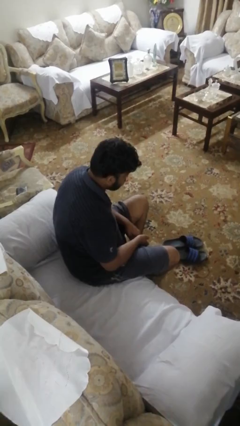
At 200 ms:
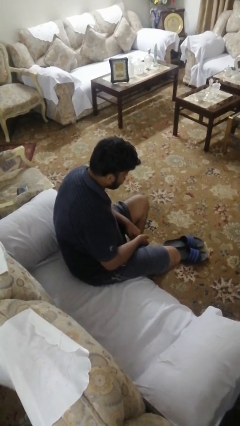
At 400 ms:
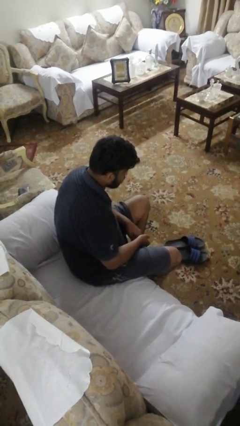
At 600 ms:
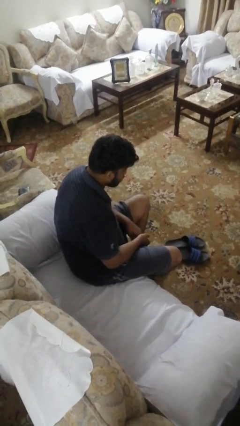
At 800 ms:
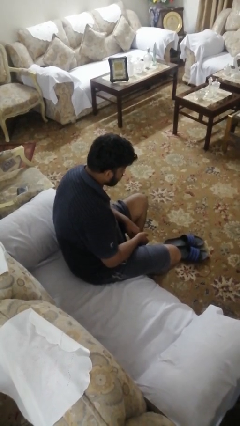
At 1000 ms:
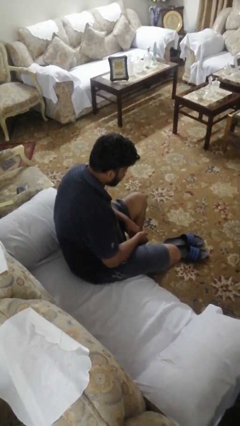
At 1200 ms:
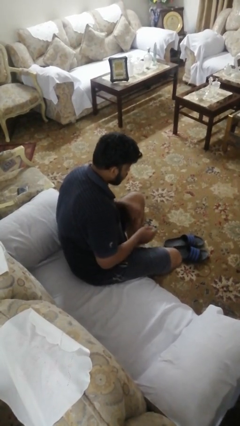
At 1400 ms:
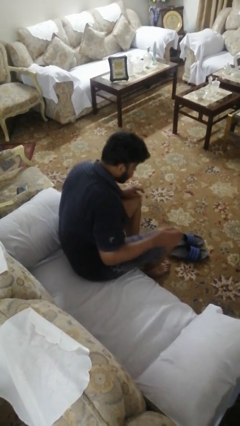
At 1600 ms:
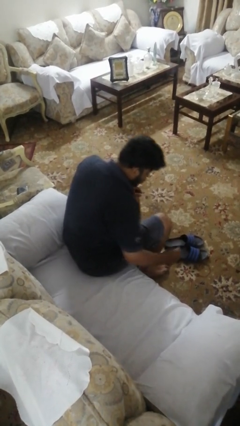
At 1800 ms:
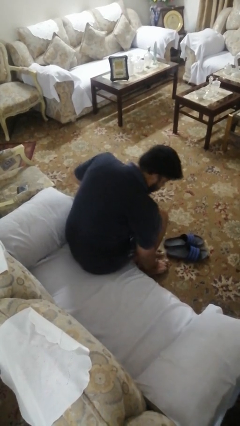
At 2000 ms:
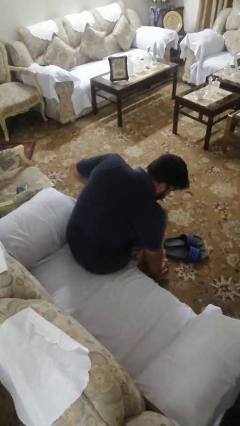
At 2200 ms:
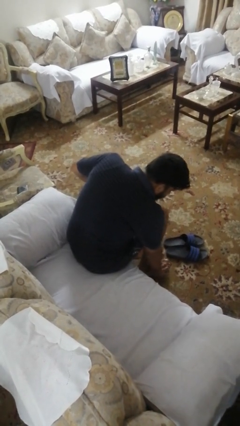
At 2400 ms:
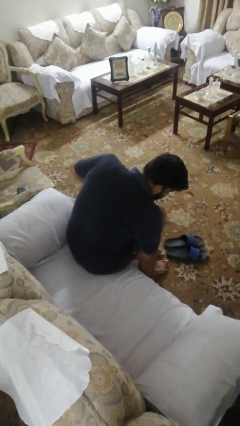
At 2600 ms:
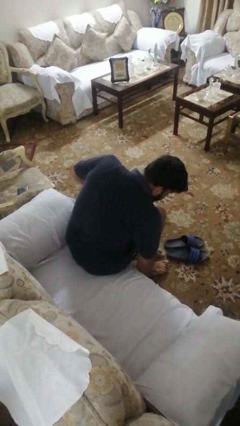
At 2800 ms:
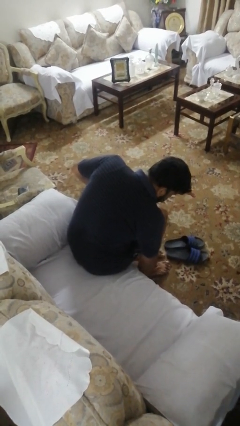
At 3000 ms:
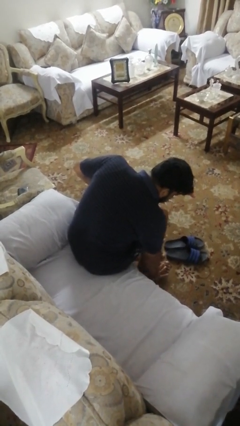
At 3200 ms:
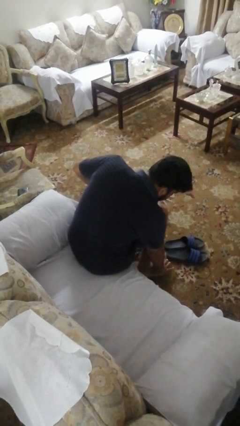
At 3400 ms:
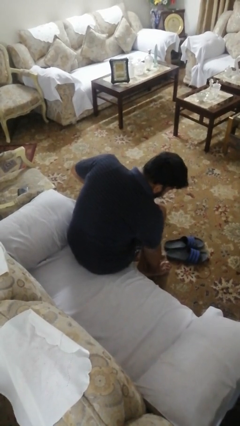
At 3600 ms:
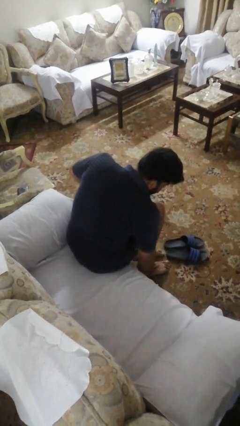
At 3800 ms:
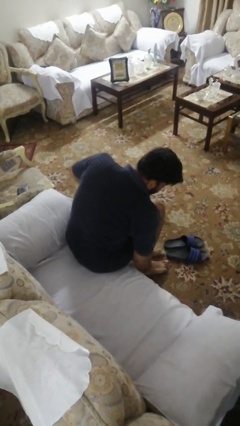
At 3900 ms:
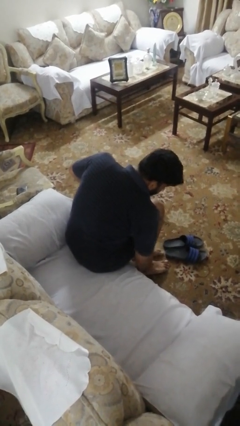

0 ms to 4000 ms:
person rubs foot

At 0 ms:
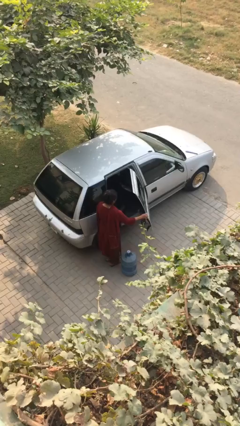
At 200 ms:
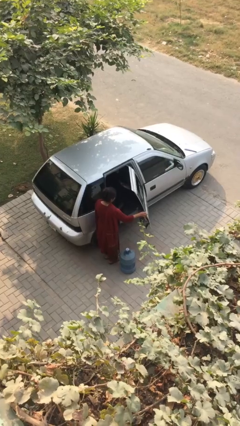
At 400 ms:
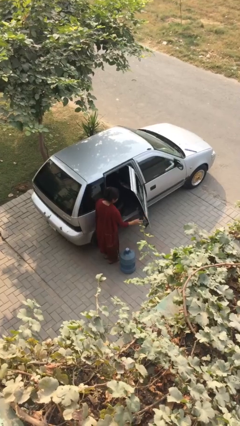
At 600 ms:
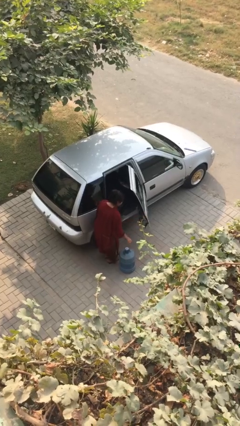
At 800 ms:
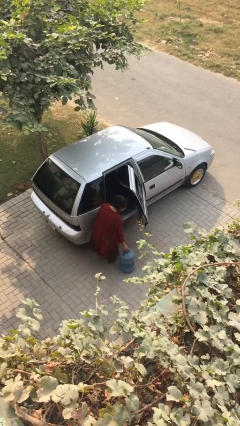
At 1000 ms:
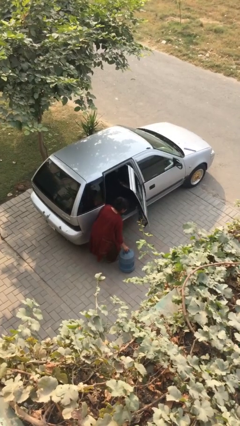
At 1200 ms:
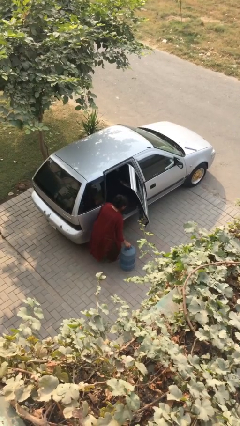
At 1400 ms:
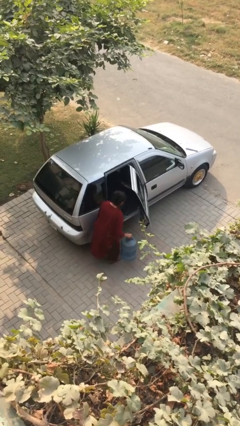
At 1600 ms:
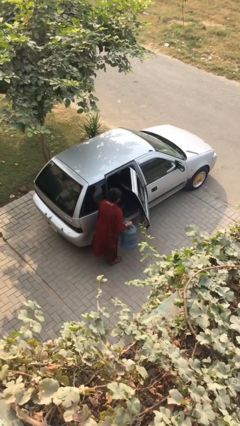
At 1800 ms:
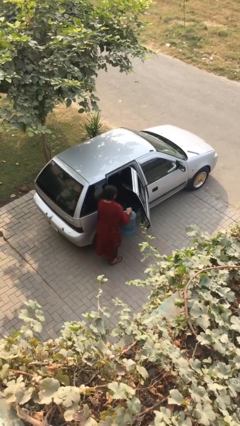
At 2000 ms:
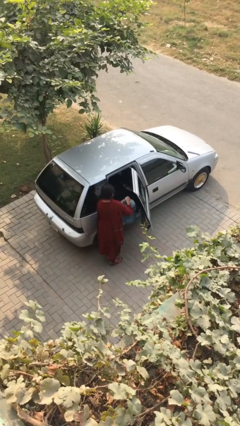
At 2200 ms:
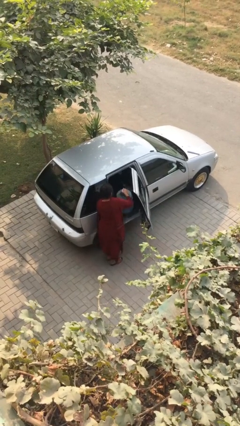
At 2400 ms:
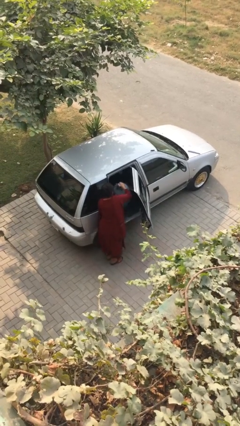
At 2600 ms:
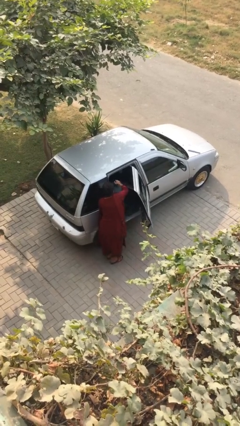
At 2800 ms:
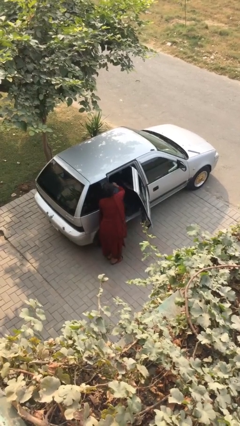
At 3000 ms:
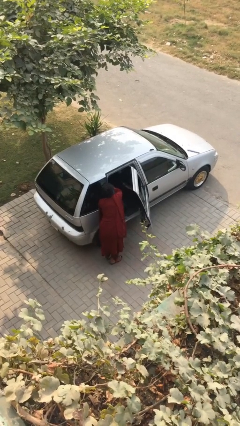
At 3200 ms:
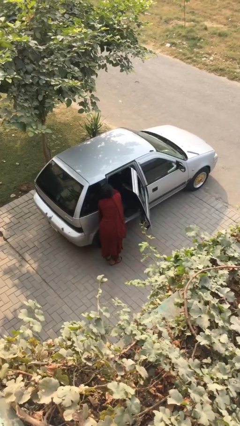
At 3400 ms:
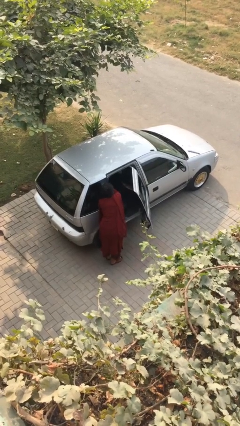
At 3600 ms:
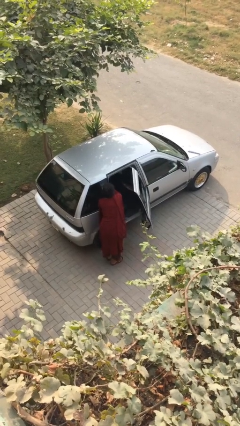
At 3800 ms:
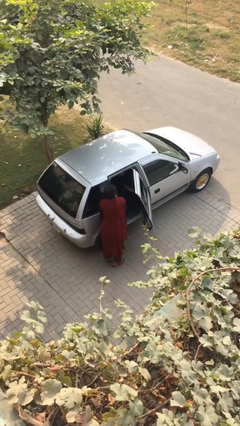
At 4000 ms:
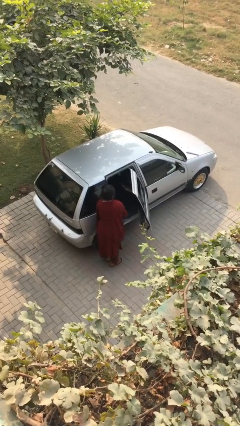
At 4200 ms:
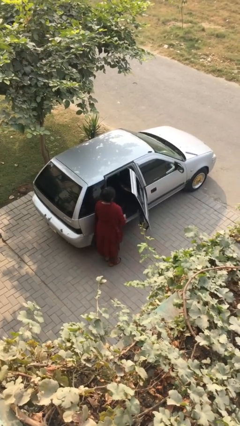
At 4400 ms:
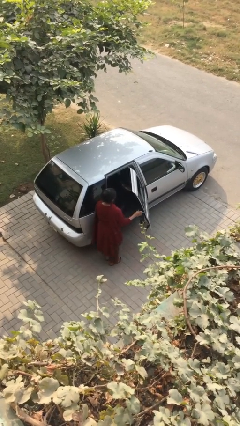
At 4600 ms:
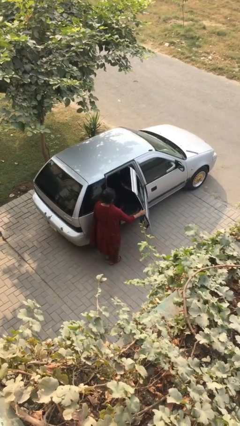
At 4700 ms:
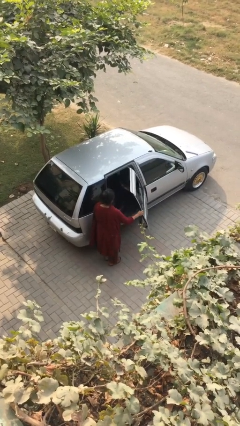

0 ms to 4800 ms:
person loads car

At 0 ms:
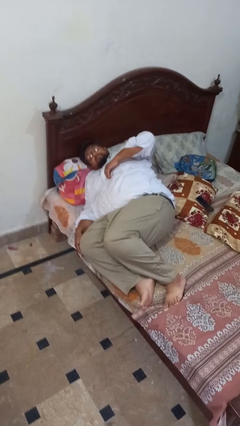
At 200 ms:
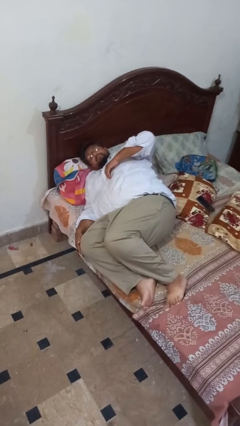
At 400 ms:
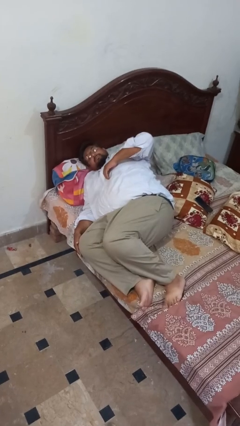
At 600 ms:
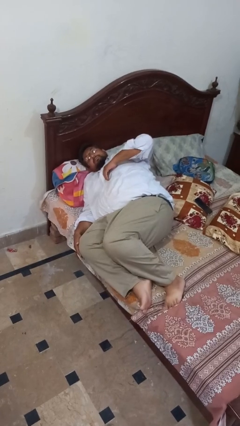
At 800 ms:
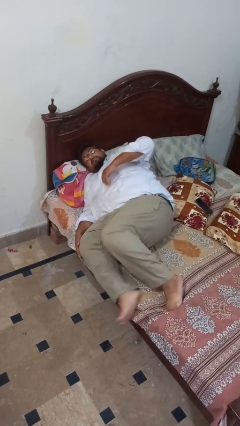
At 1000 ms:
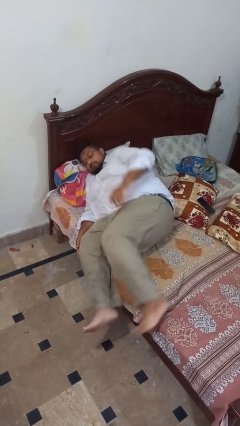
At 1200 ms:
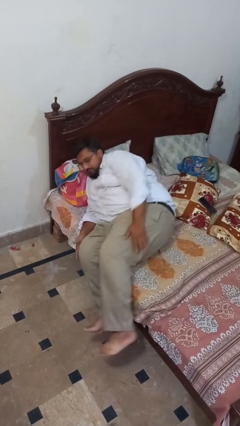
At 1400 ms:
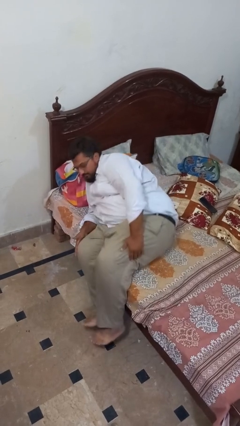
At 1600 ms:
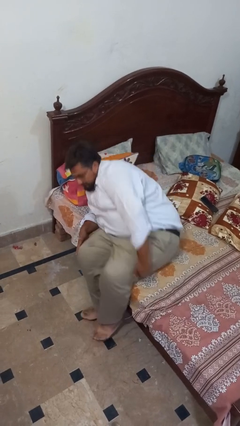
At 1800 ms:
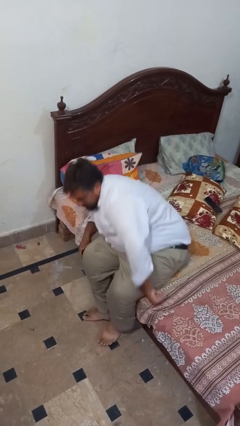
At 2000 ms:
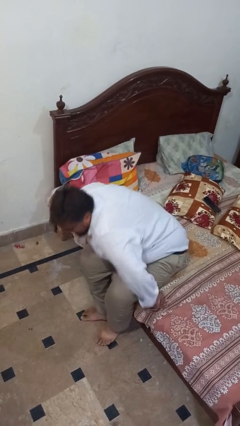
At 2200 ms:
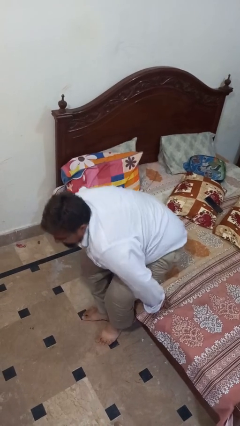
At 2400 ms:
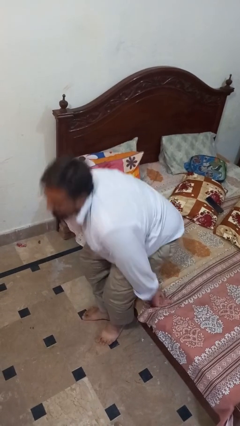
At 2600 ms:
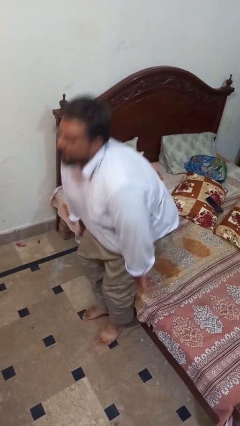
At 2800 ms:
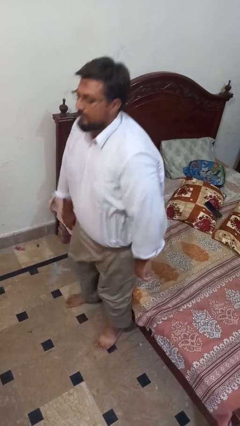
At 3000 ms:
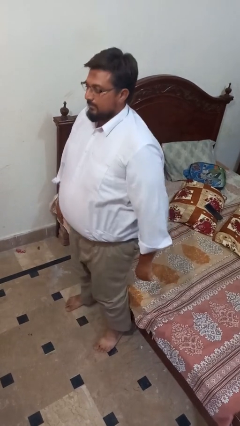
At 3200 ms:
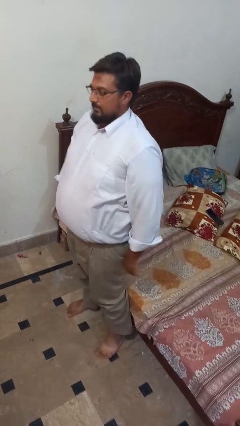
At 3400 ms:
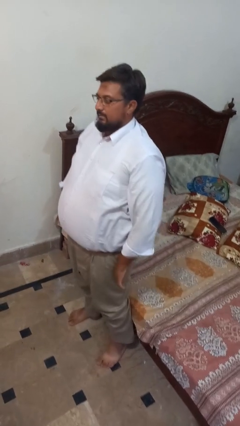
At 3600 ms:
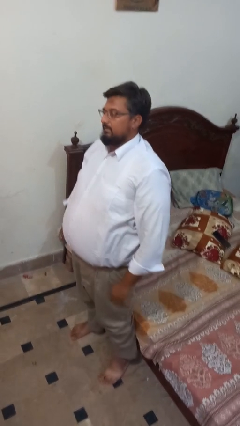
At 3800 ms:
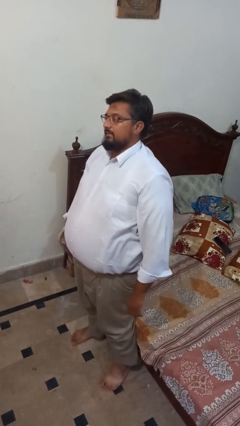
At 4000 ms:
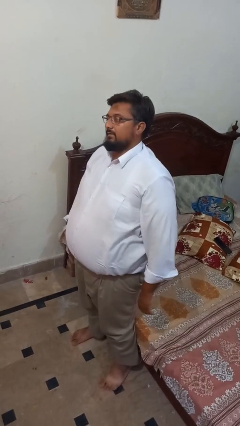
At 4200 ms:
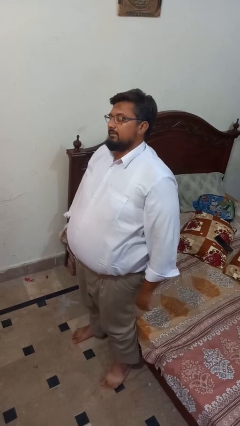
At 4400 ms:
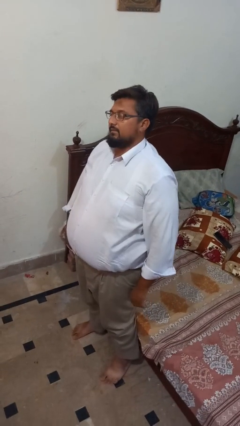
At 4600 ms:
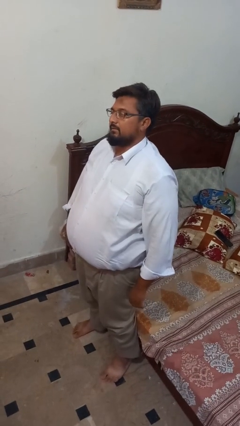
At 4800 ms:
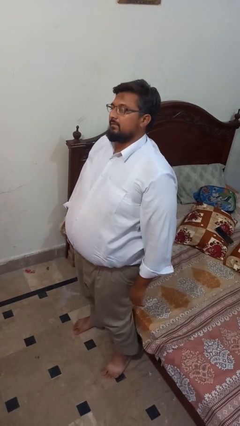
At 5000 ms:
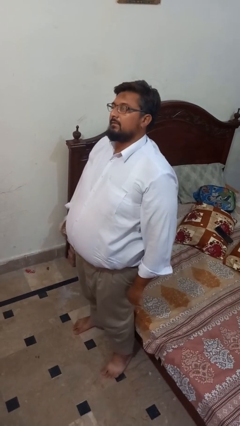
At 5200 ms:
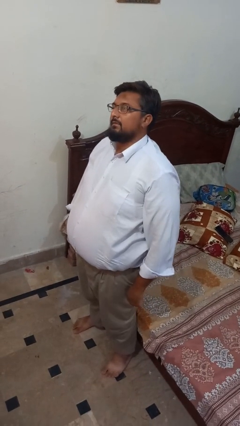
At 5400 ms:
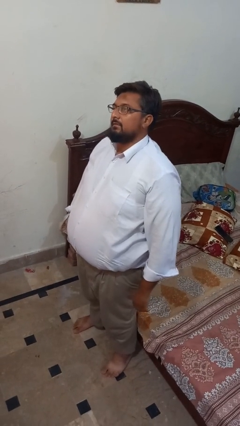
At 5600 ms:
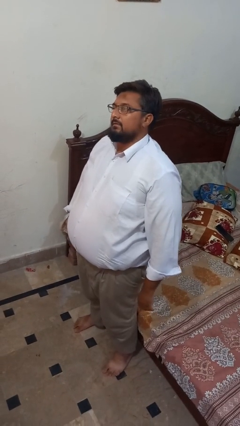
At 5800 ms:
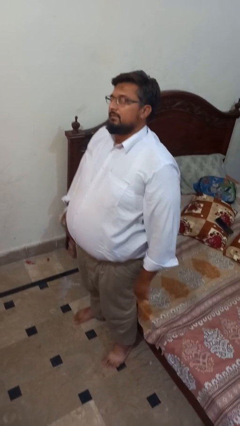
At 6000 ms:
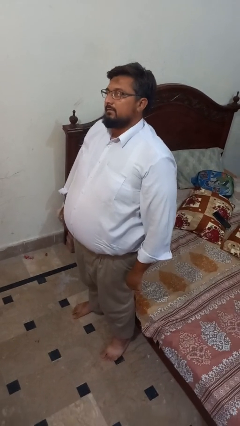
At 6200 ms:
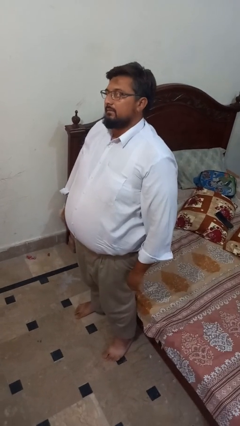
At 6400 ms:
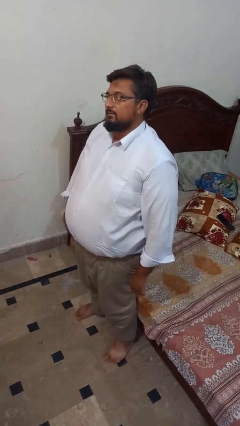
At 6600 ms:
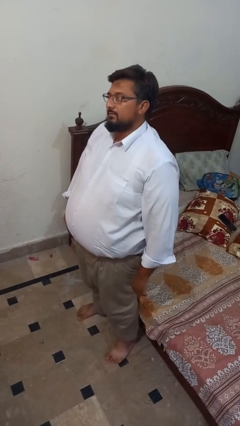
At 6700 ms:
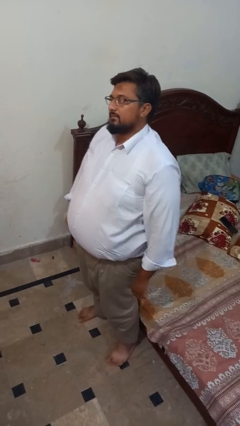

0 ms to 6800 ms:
person stands up

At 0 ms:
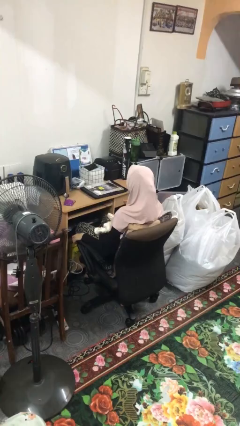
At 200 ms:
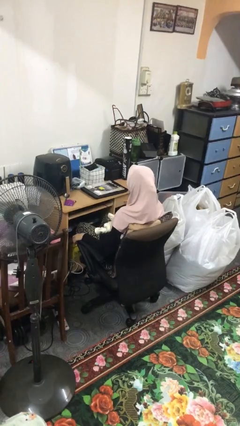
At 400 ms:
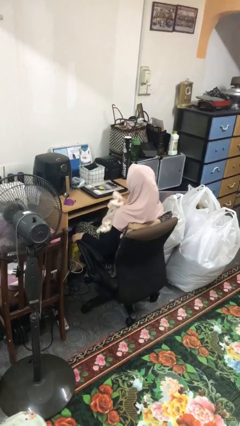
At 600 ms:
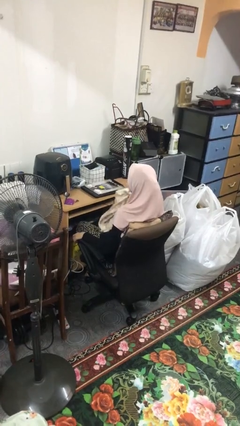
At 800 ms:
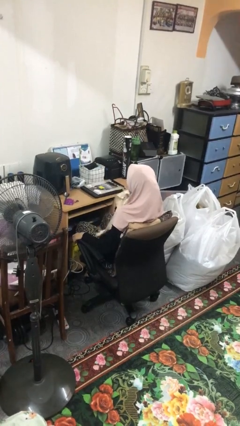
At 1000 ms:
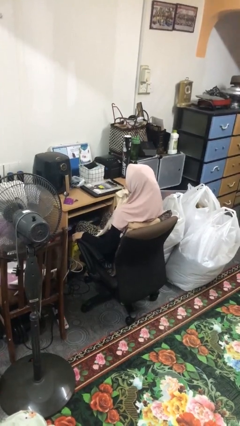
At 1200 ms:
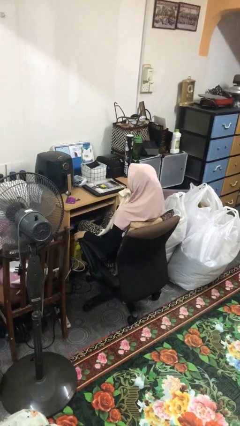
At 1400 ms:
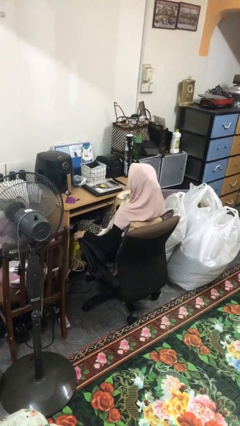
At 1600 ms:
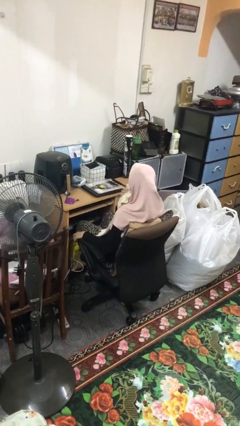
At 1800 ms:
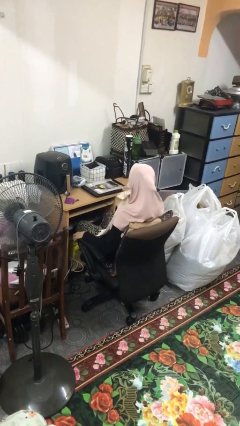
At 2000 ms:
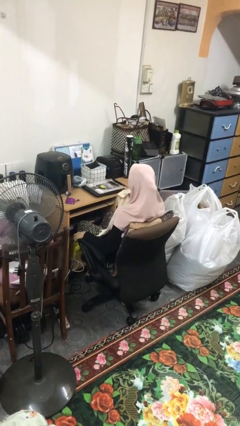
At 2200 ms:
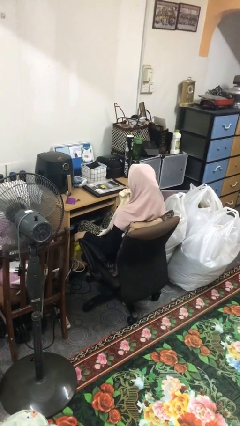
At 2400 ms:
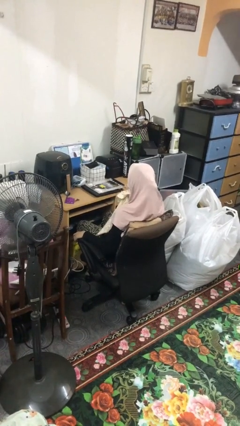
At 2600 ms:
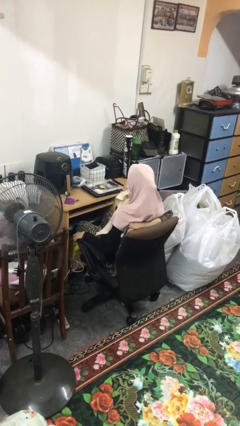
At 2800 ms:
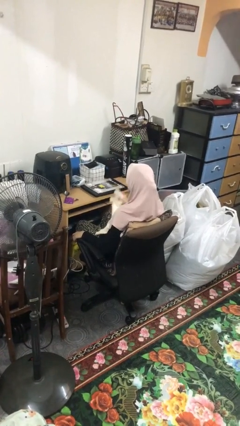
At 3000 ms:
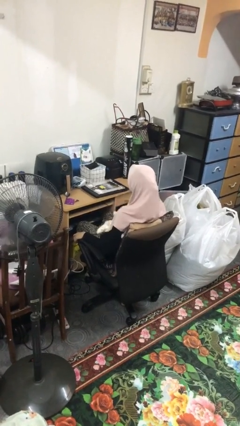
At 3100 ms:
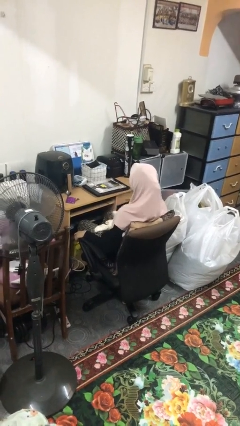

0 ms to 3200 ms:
person wipes mouth with napkin
